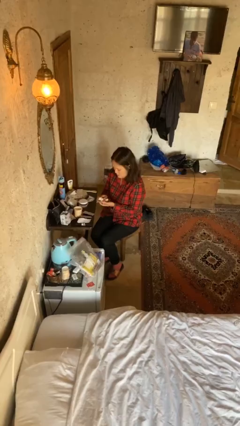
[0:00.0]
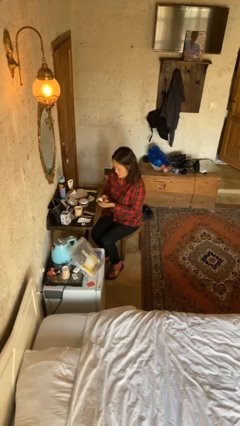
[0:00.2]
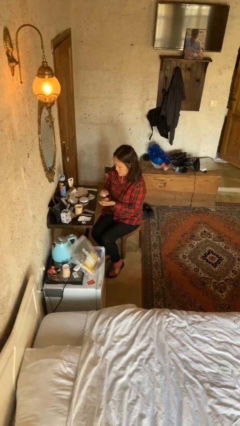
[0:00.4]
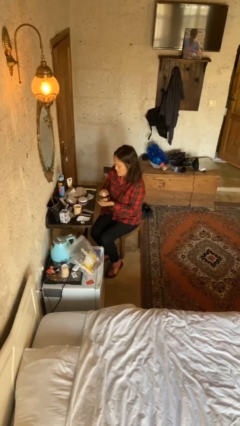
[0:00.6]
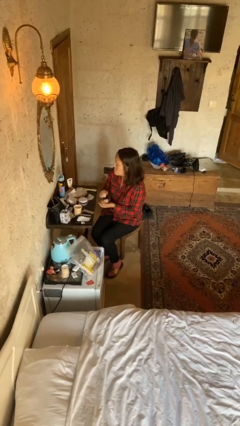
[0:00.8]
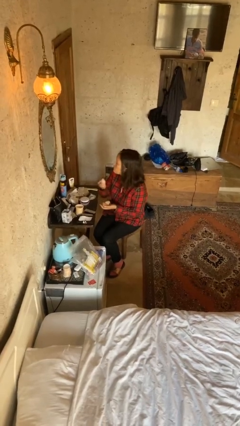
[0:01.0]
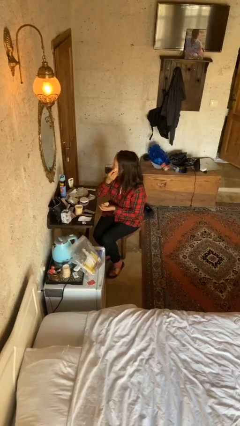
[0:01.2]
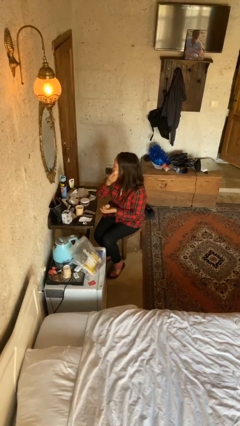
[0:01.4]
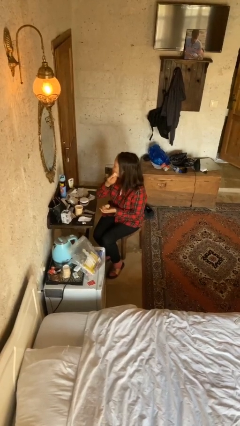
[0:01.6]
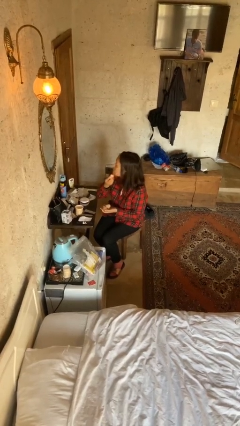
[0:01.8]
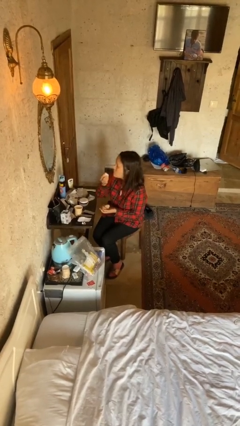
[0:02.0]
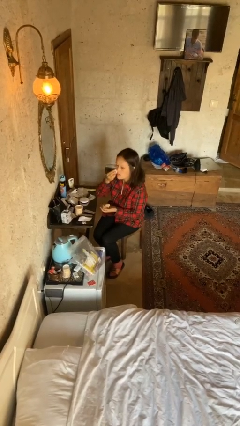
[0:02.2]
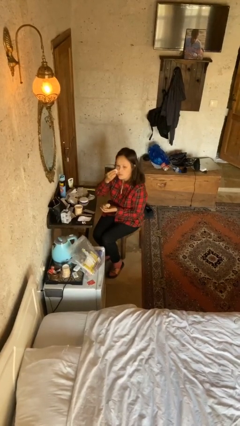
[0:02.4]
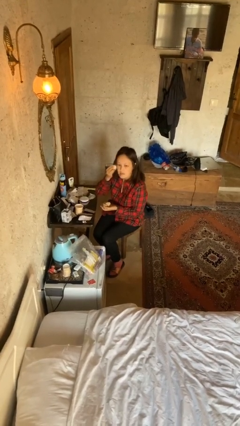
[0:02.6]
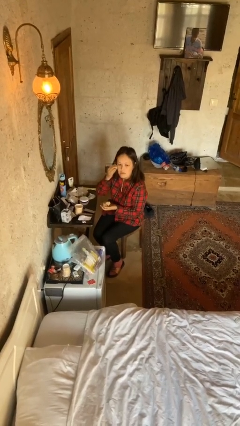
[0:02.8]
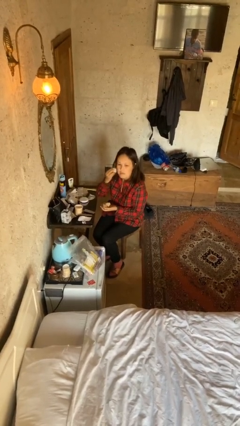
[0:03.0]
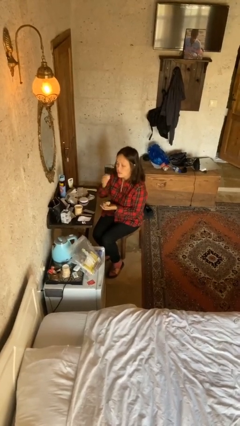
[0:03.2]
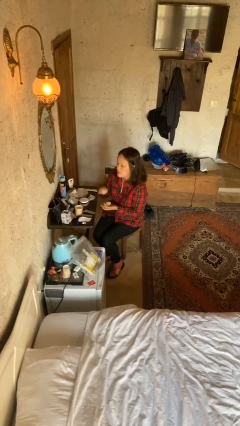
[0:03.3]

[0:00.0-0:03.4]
person applies foundation makeup

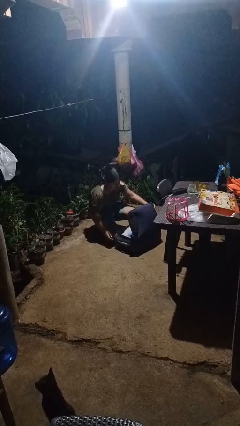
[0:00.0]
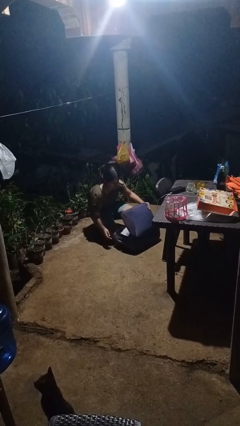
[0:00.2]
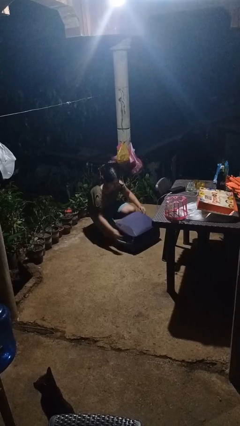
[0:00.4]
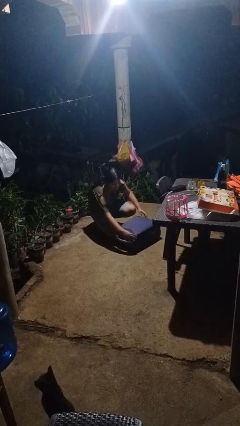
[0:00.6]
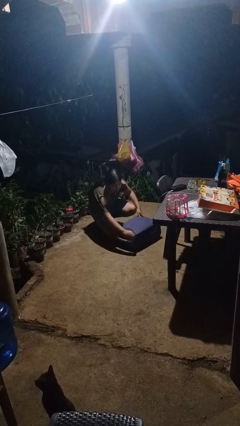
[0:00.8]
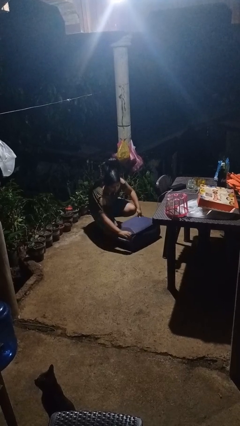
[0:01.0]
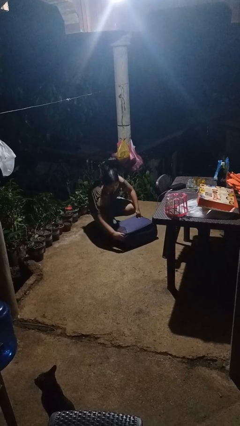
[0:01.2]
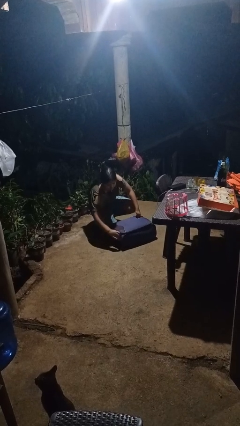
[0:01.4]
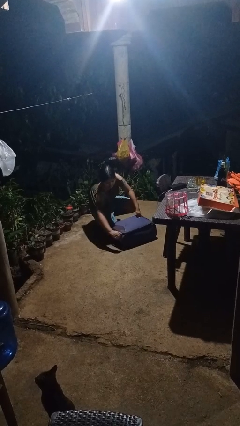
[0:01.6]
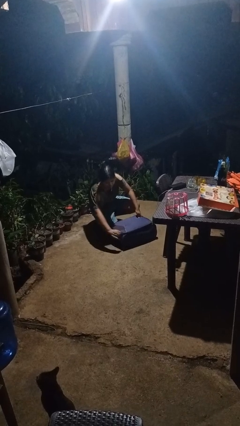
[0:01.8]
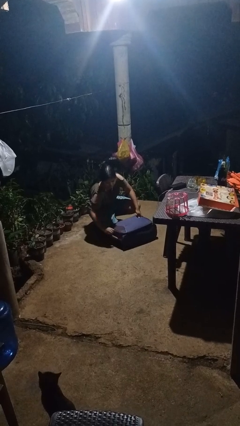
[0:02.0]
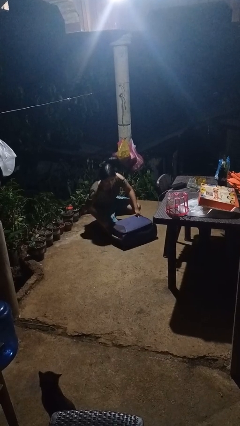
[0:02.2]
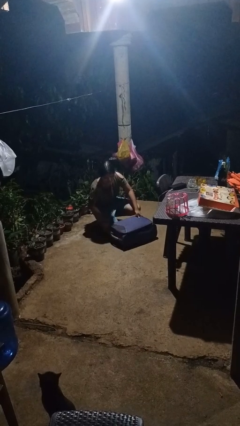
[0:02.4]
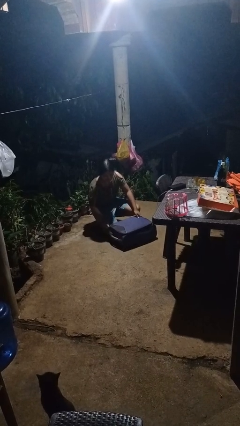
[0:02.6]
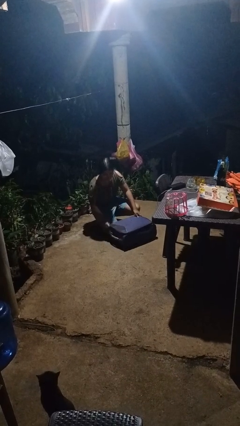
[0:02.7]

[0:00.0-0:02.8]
person closes suitcase

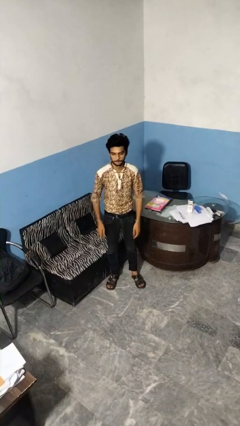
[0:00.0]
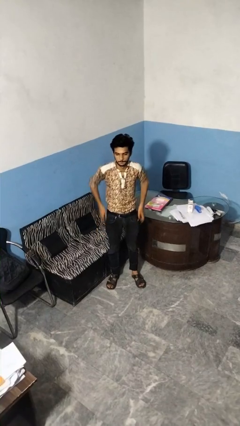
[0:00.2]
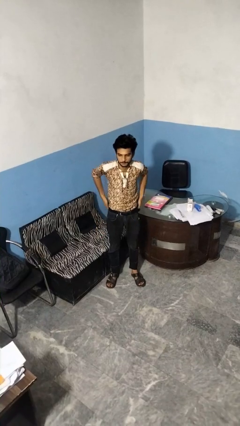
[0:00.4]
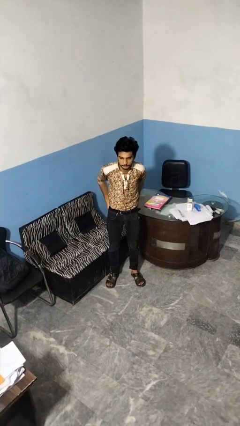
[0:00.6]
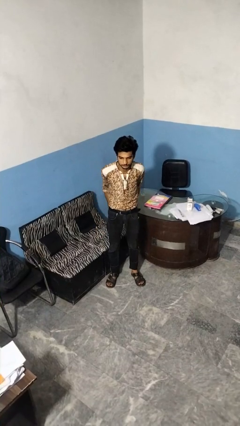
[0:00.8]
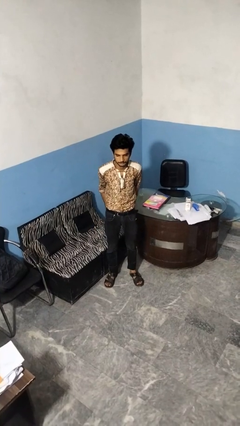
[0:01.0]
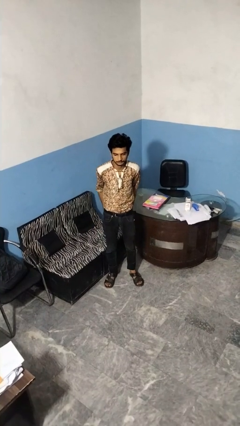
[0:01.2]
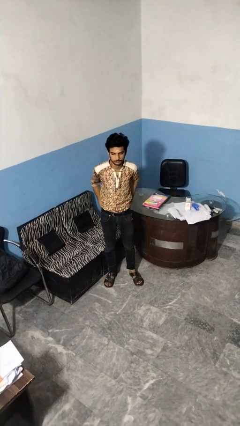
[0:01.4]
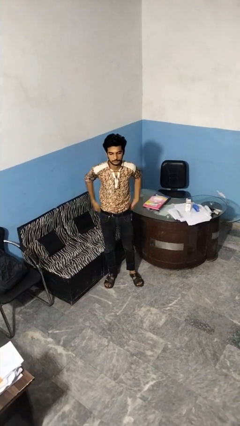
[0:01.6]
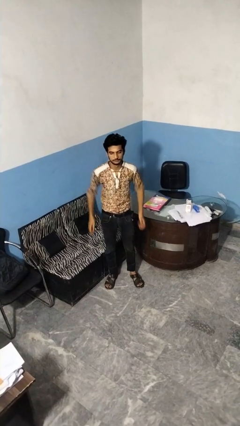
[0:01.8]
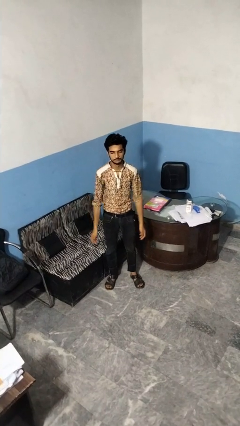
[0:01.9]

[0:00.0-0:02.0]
person puts hands in back pockets

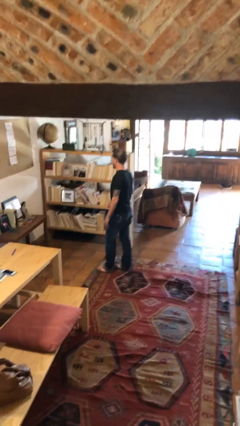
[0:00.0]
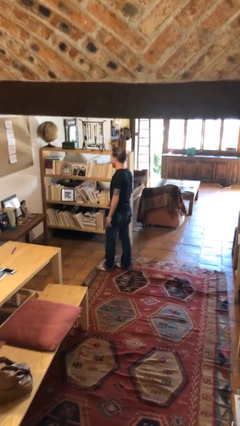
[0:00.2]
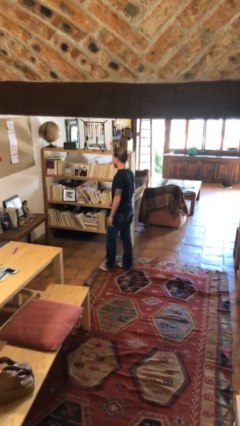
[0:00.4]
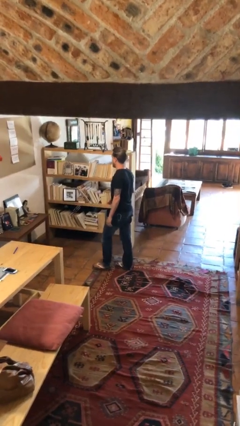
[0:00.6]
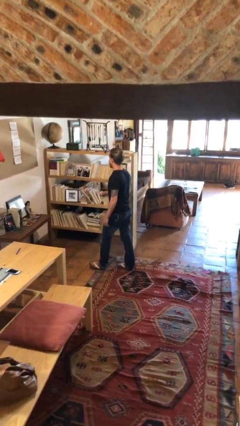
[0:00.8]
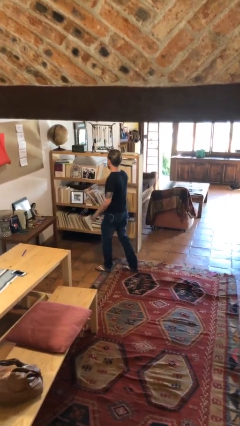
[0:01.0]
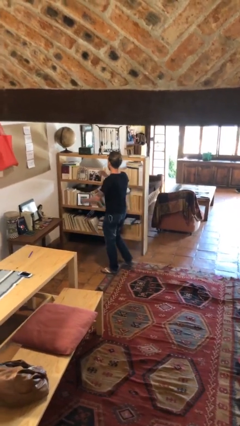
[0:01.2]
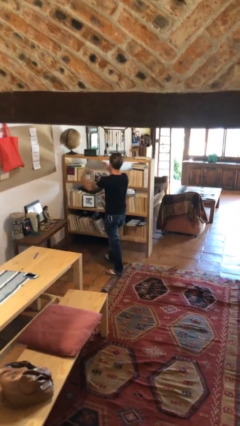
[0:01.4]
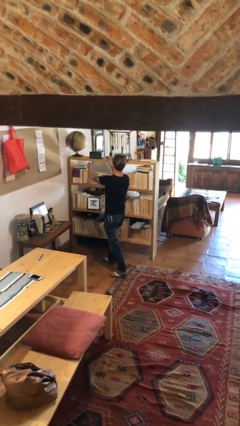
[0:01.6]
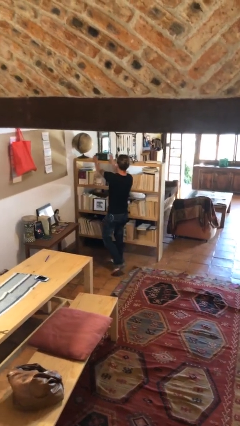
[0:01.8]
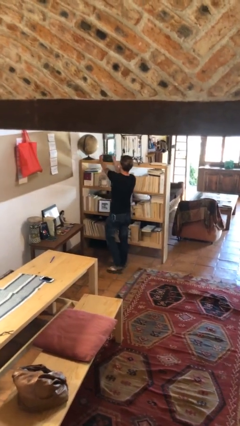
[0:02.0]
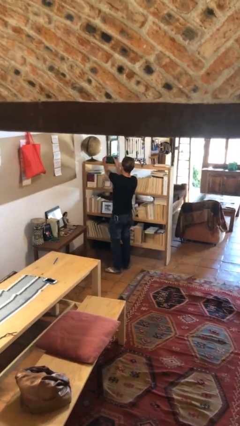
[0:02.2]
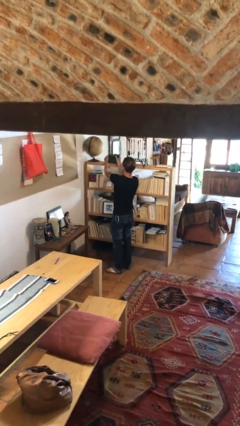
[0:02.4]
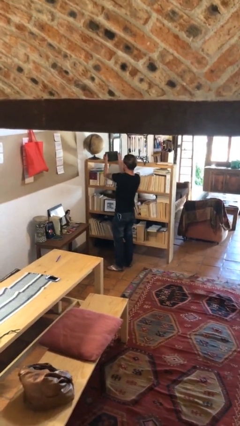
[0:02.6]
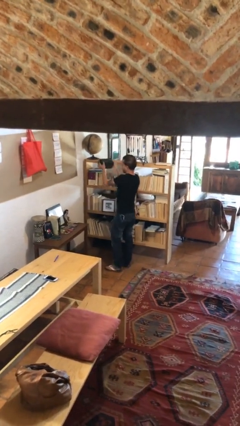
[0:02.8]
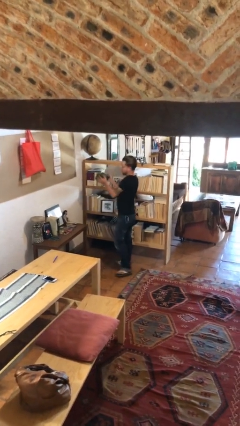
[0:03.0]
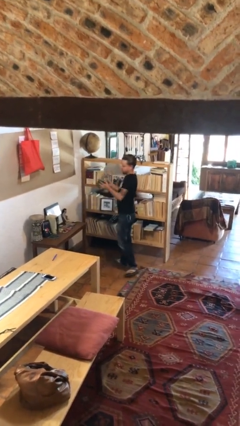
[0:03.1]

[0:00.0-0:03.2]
person picks up object from shelf

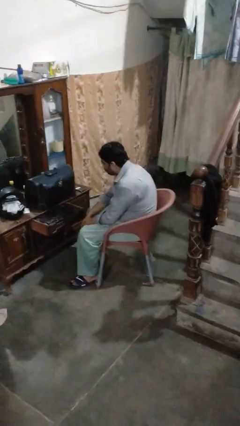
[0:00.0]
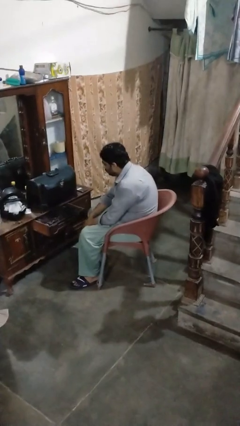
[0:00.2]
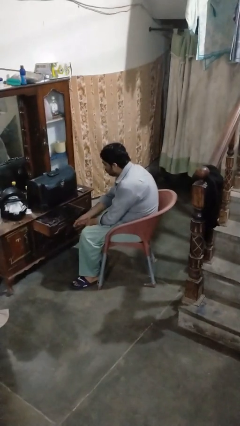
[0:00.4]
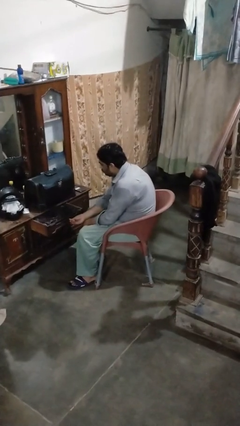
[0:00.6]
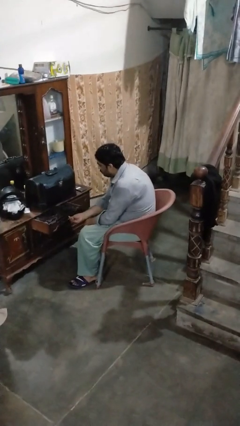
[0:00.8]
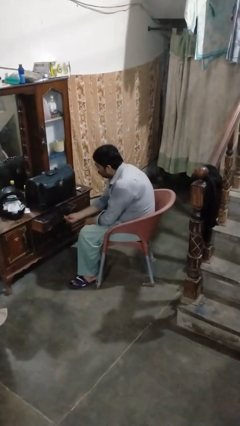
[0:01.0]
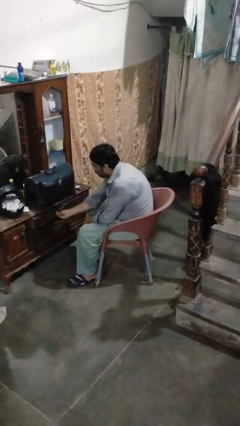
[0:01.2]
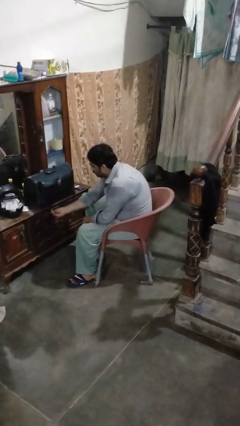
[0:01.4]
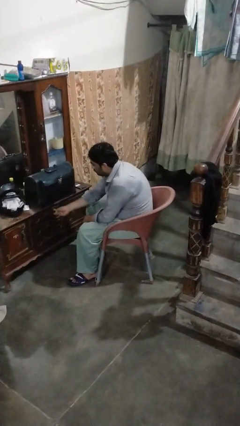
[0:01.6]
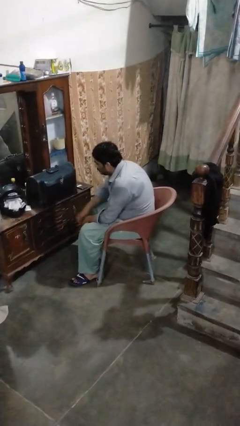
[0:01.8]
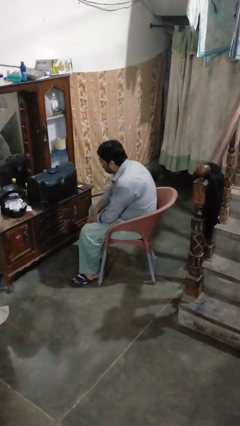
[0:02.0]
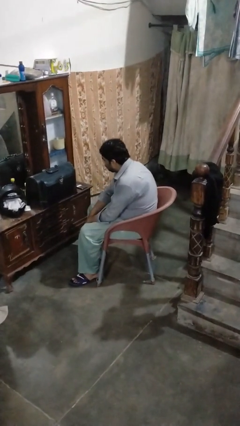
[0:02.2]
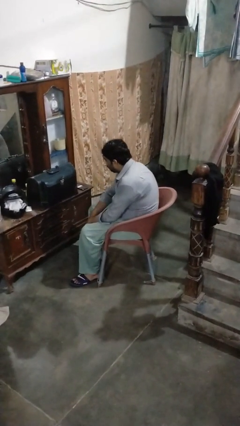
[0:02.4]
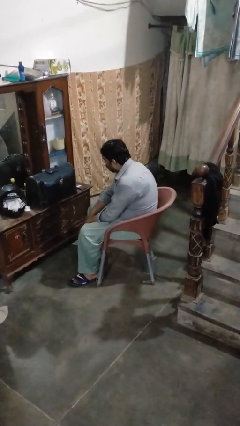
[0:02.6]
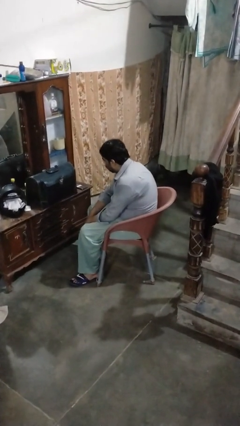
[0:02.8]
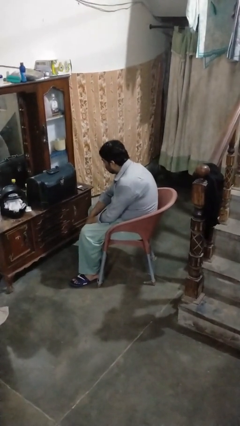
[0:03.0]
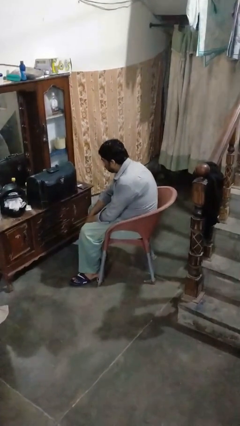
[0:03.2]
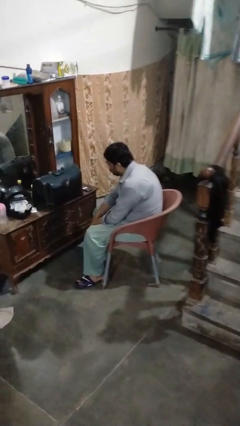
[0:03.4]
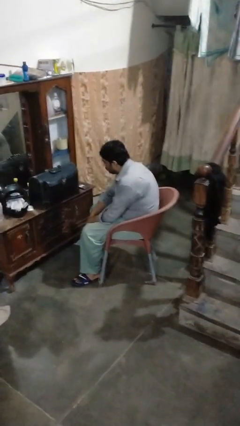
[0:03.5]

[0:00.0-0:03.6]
person closes dresser drawer

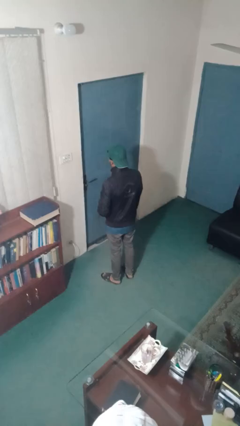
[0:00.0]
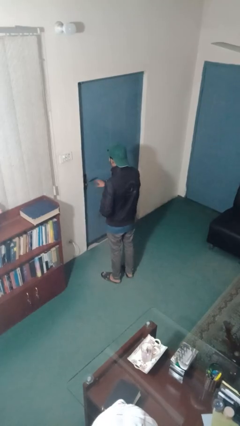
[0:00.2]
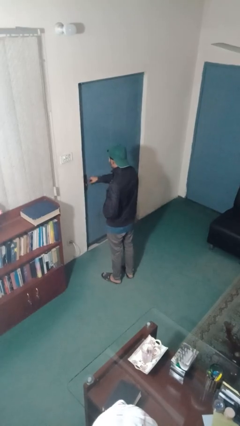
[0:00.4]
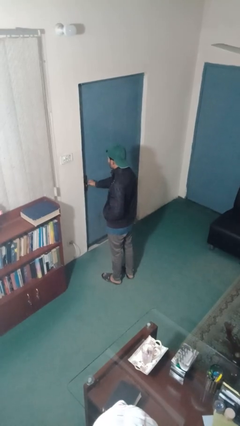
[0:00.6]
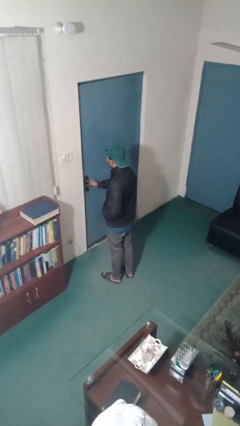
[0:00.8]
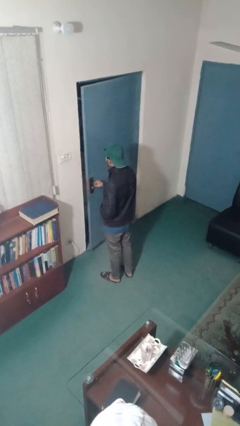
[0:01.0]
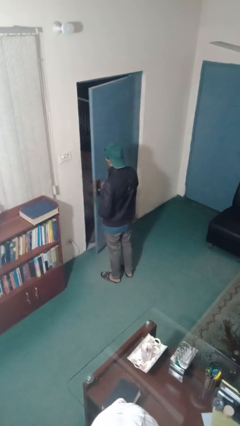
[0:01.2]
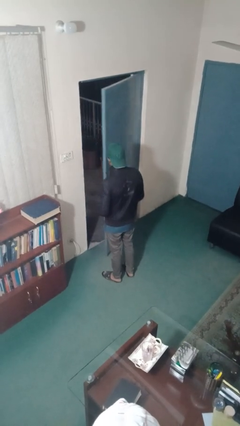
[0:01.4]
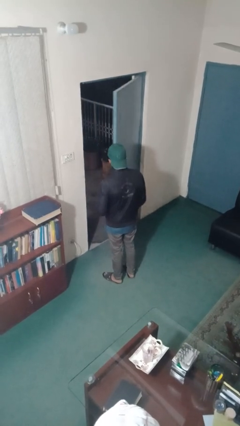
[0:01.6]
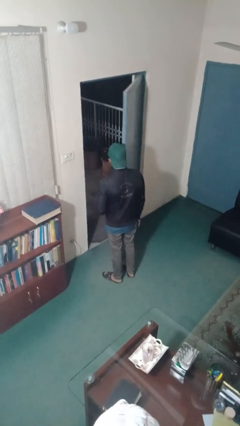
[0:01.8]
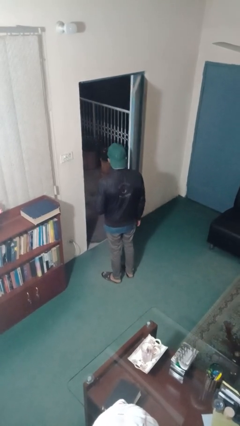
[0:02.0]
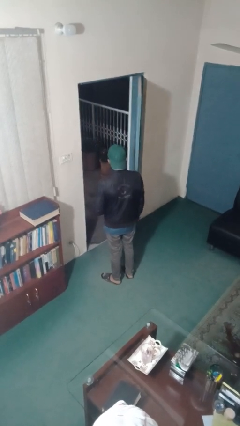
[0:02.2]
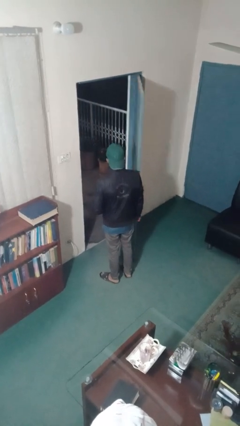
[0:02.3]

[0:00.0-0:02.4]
person opens facility door
